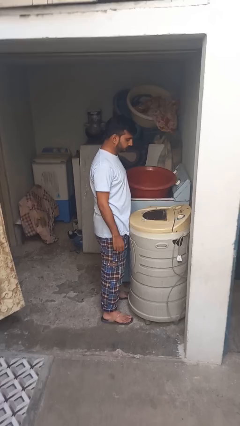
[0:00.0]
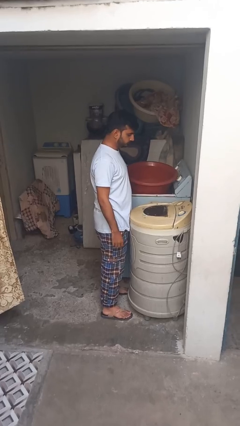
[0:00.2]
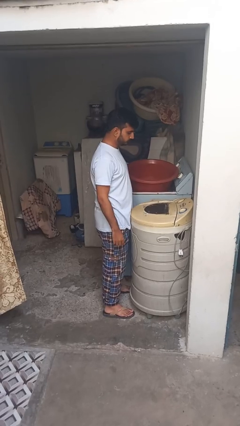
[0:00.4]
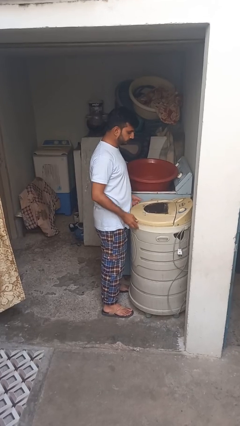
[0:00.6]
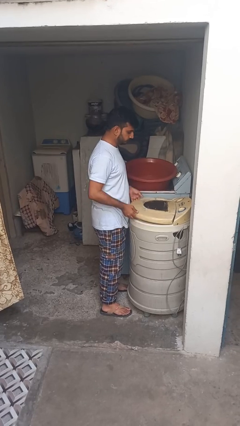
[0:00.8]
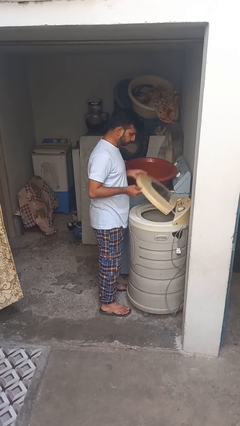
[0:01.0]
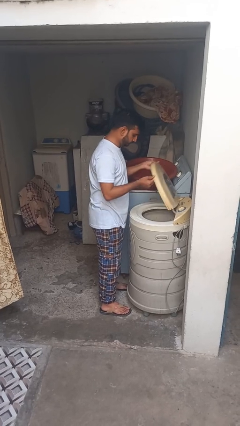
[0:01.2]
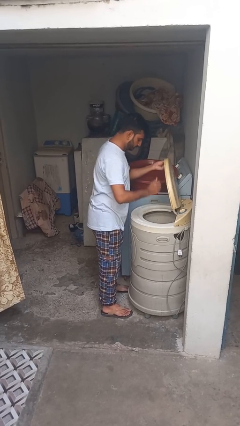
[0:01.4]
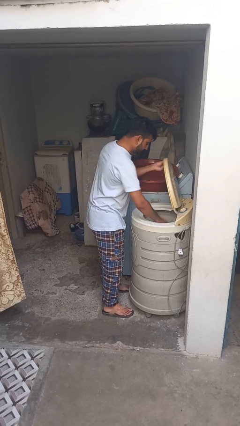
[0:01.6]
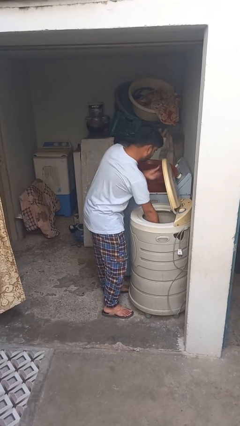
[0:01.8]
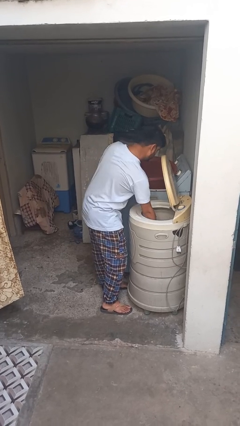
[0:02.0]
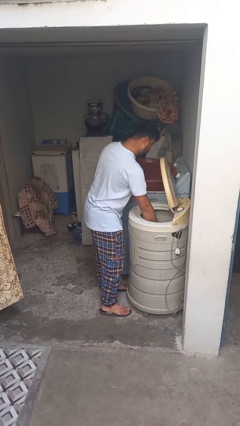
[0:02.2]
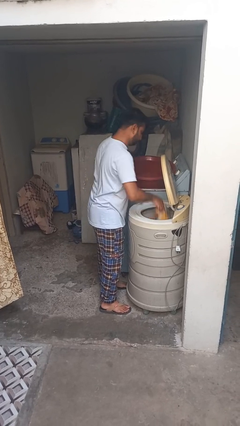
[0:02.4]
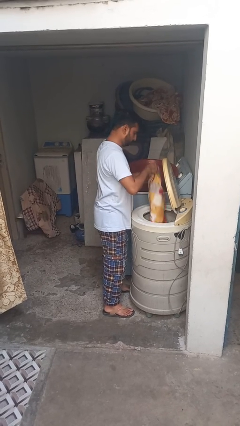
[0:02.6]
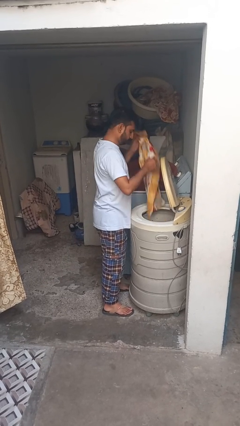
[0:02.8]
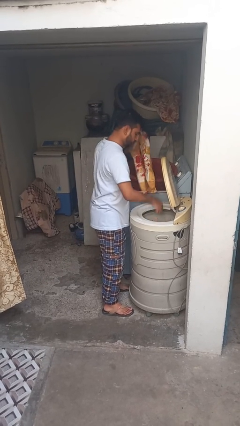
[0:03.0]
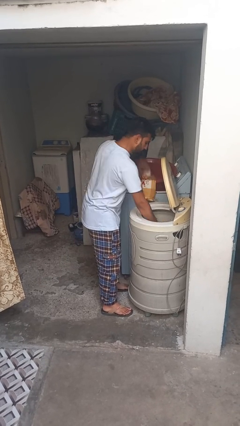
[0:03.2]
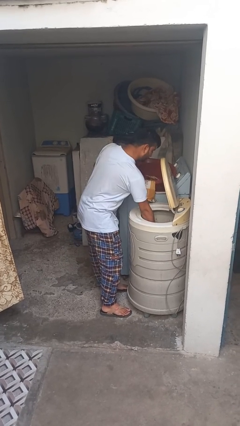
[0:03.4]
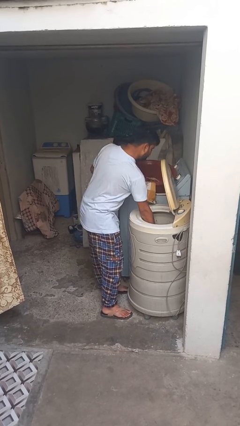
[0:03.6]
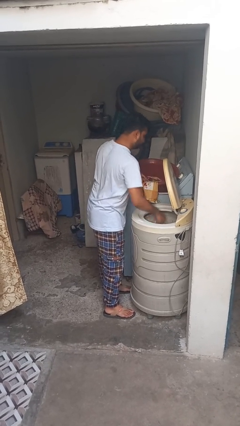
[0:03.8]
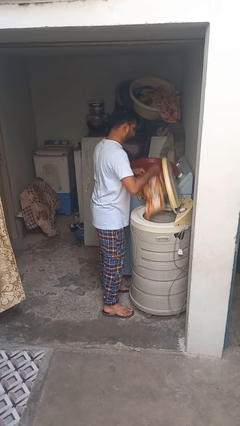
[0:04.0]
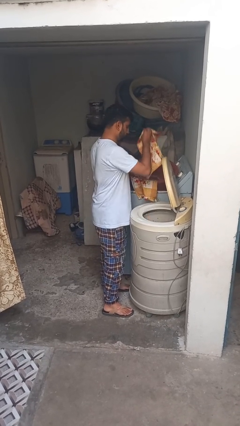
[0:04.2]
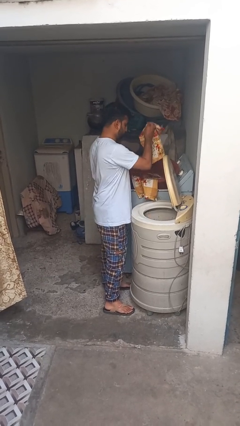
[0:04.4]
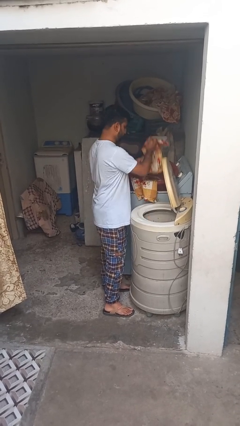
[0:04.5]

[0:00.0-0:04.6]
person unloads clotheswasher

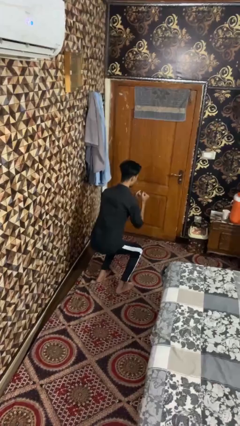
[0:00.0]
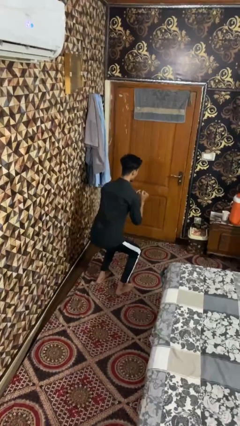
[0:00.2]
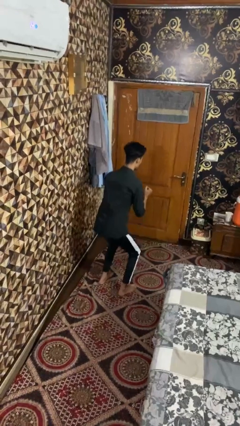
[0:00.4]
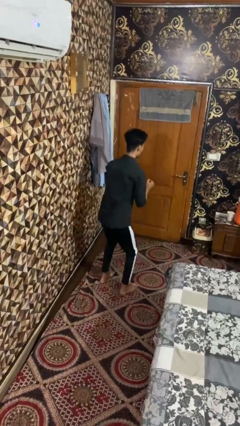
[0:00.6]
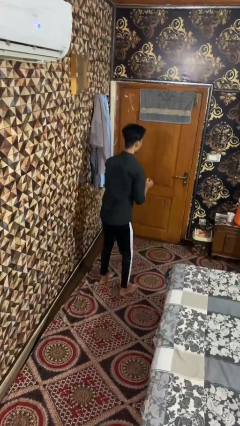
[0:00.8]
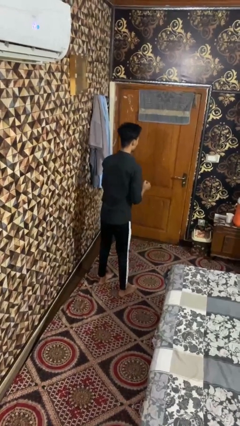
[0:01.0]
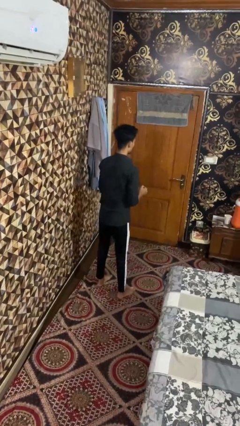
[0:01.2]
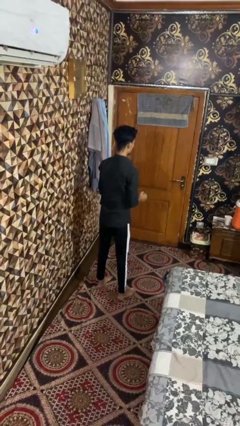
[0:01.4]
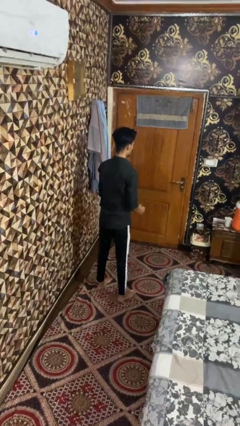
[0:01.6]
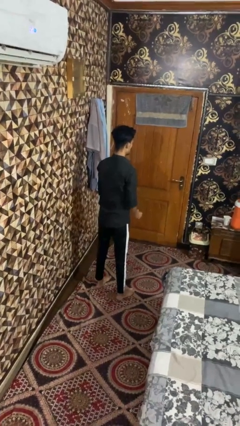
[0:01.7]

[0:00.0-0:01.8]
person stands up

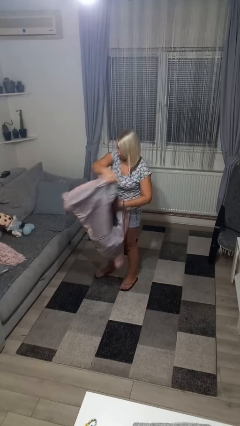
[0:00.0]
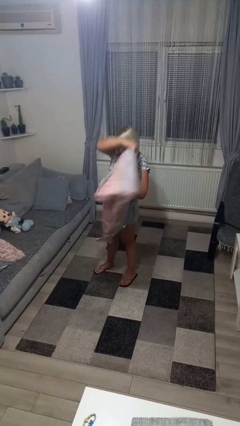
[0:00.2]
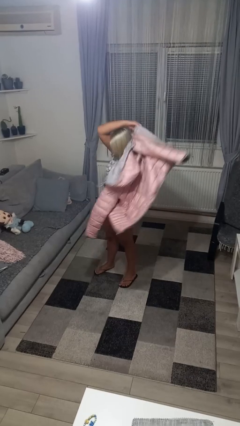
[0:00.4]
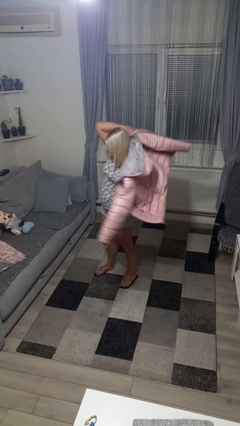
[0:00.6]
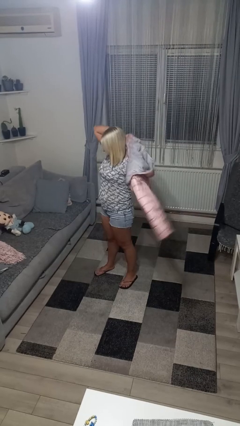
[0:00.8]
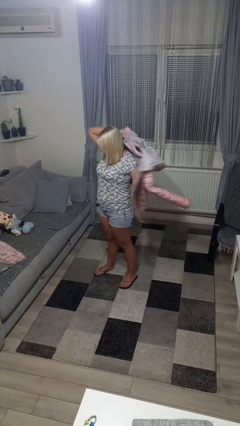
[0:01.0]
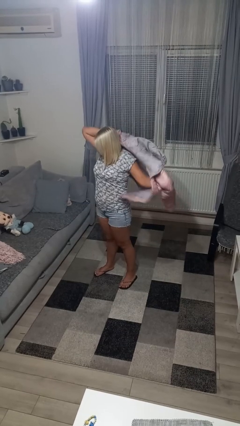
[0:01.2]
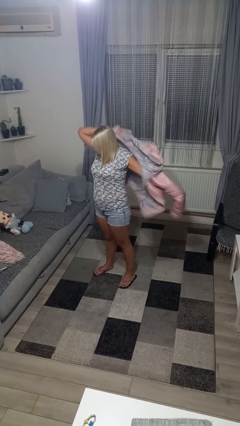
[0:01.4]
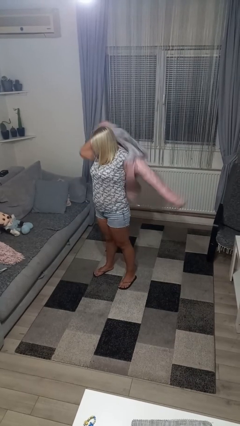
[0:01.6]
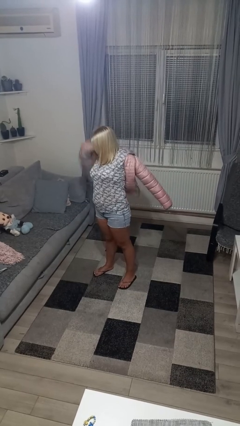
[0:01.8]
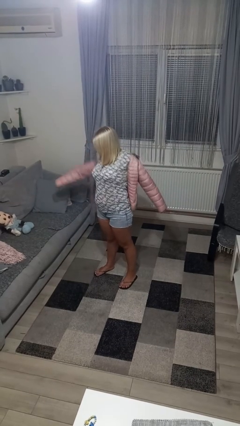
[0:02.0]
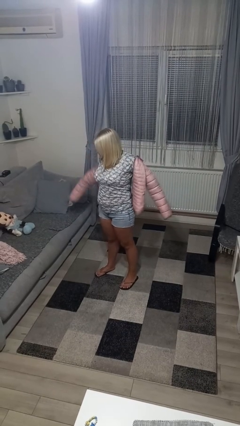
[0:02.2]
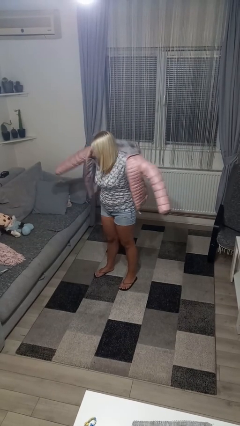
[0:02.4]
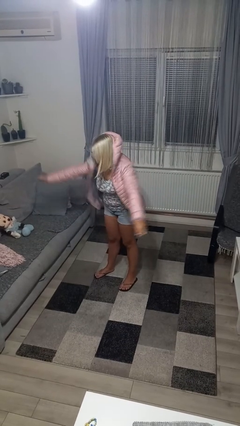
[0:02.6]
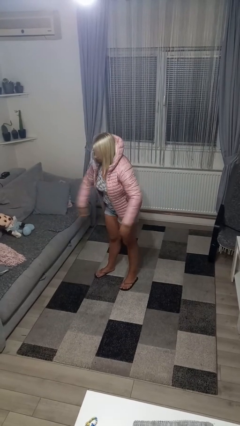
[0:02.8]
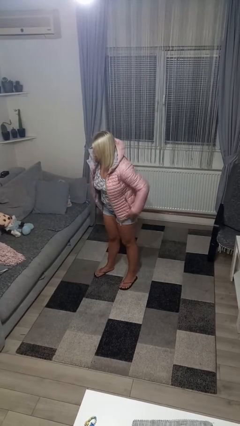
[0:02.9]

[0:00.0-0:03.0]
person puts on jacket

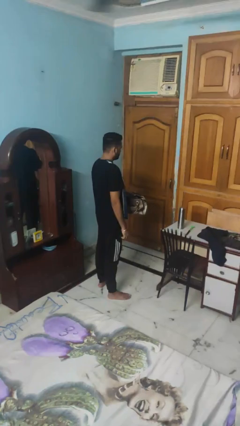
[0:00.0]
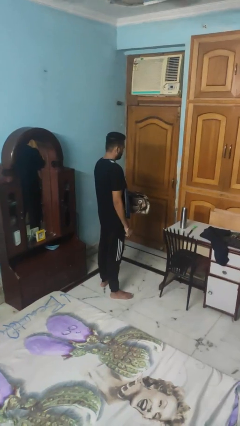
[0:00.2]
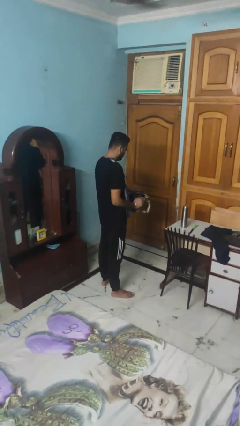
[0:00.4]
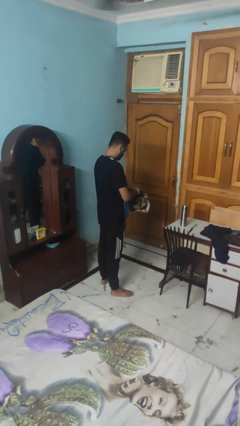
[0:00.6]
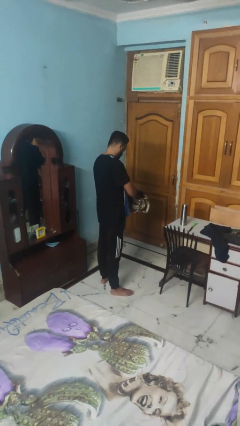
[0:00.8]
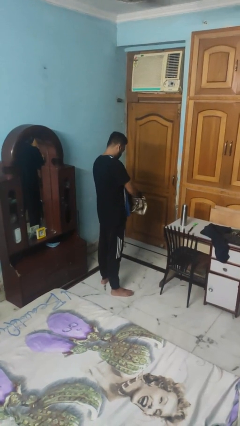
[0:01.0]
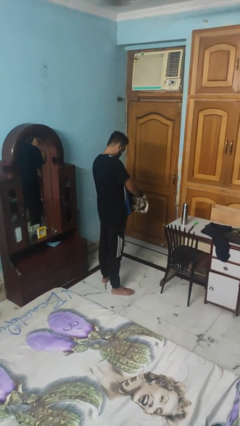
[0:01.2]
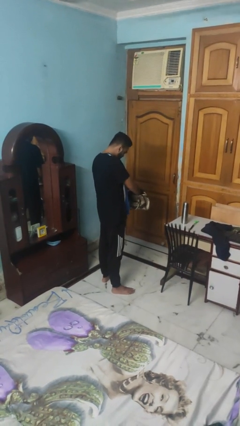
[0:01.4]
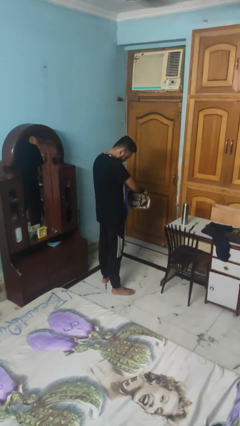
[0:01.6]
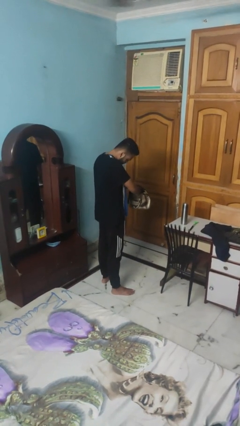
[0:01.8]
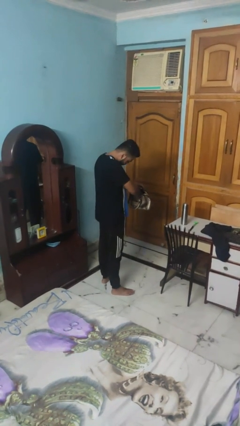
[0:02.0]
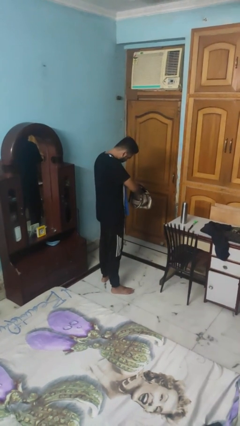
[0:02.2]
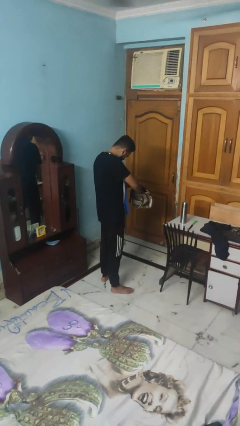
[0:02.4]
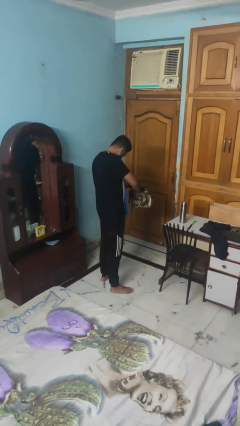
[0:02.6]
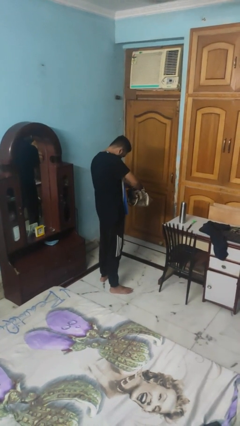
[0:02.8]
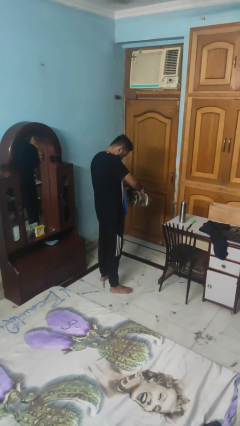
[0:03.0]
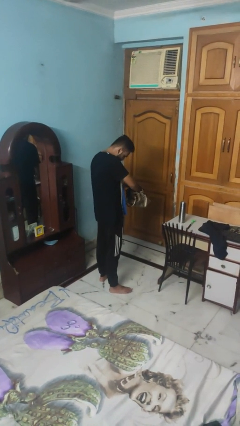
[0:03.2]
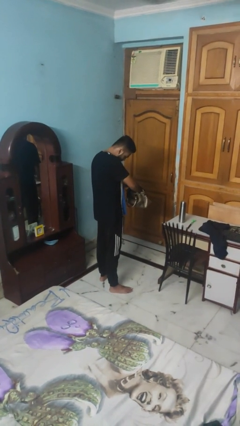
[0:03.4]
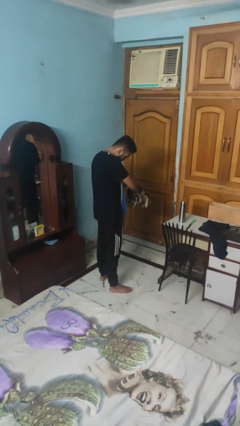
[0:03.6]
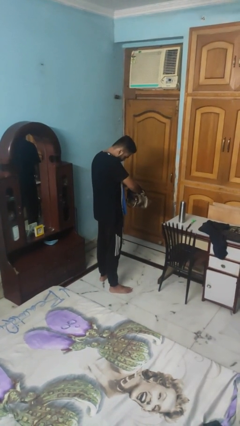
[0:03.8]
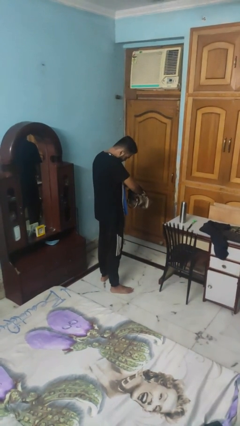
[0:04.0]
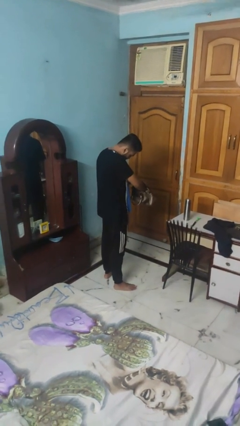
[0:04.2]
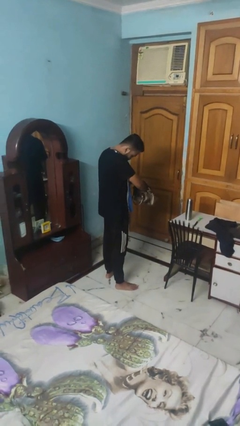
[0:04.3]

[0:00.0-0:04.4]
person searches in purse

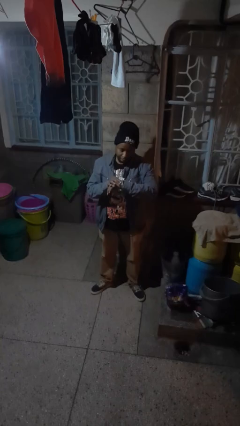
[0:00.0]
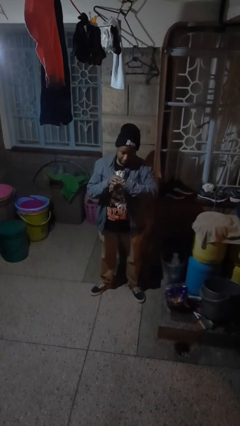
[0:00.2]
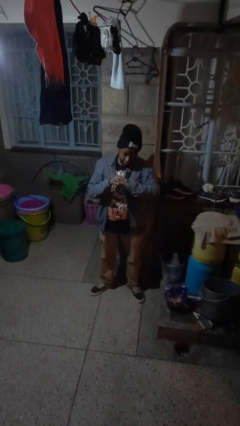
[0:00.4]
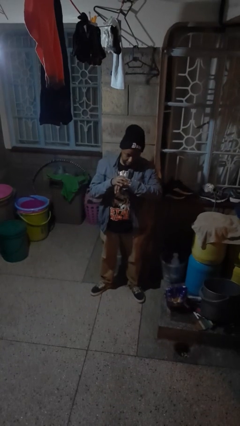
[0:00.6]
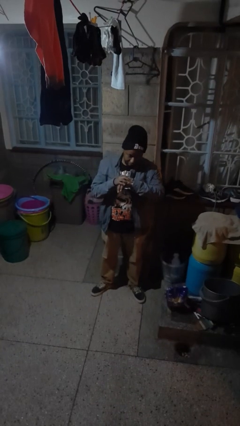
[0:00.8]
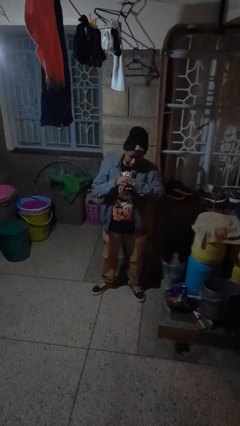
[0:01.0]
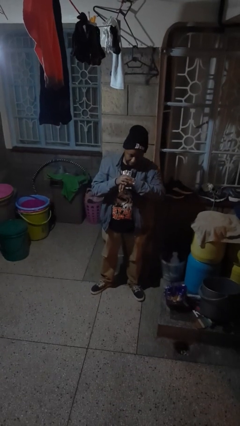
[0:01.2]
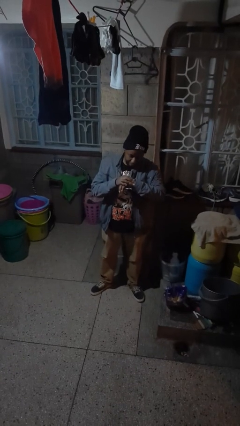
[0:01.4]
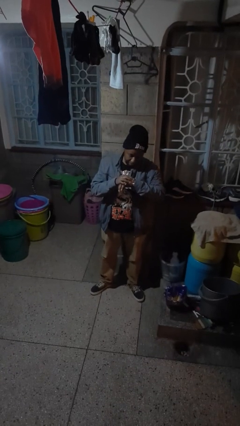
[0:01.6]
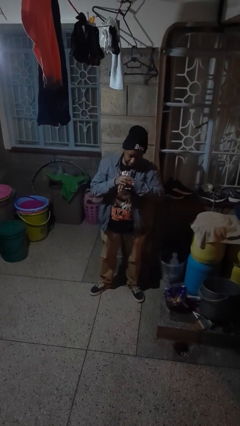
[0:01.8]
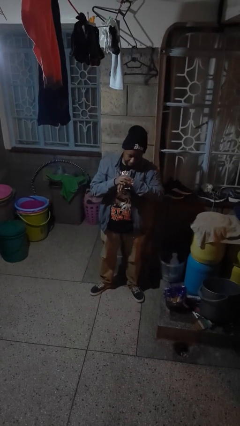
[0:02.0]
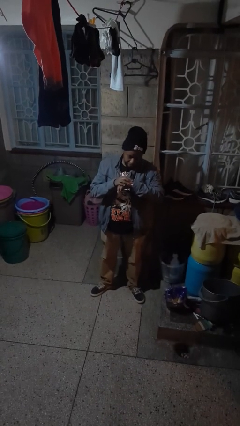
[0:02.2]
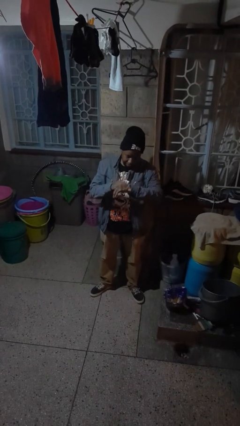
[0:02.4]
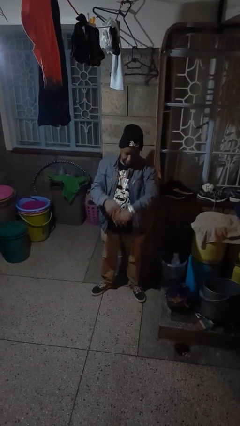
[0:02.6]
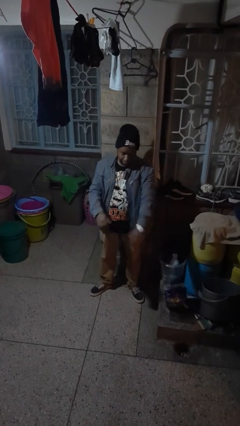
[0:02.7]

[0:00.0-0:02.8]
person looks at wristwatch

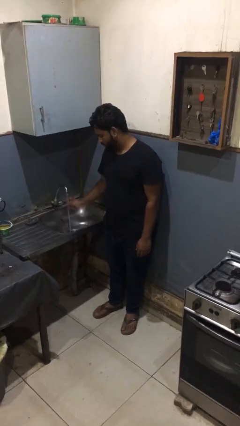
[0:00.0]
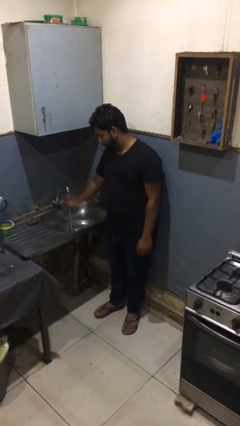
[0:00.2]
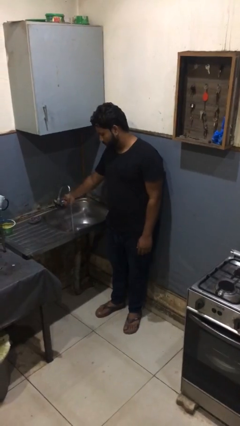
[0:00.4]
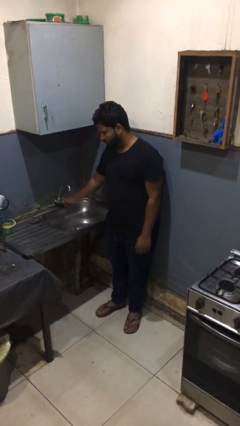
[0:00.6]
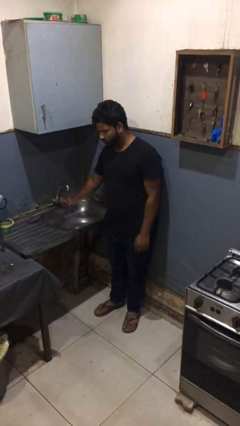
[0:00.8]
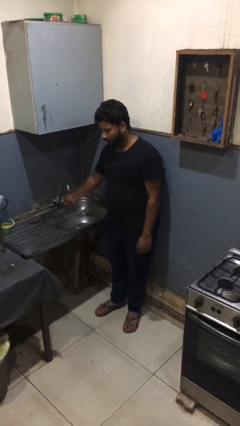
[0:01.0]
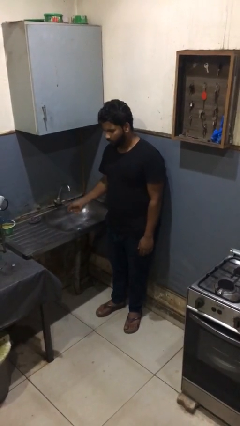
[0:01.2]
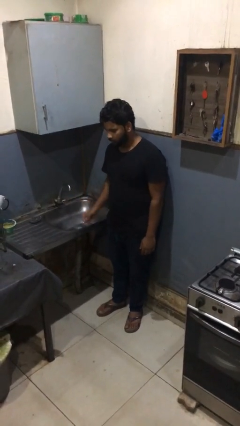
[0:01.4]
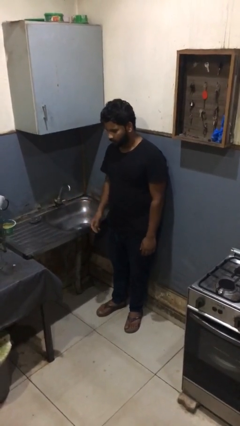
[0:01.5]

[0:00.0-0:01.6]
person turns off faucet
